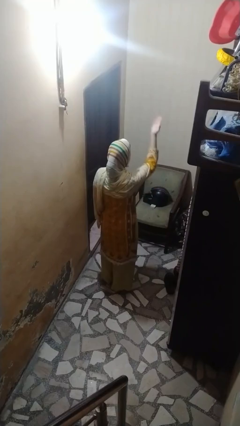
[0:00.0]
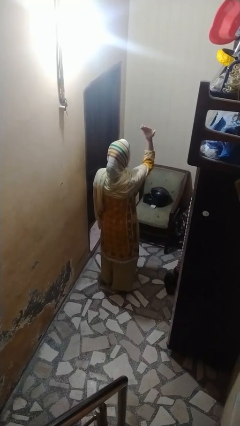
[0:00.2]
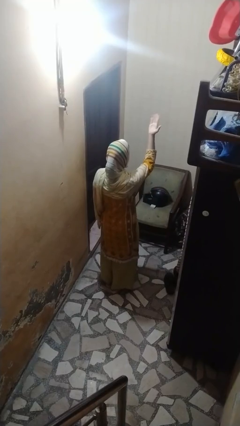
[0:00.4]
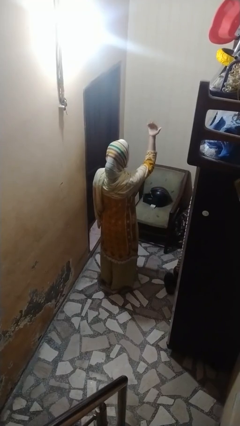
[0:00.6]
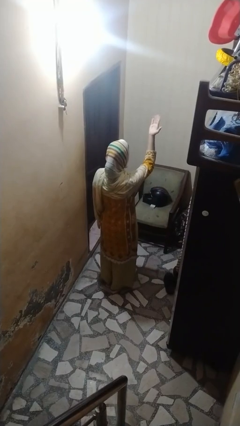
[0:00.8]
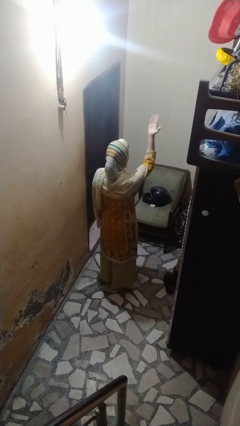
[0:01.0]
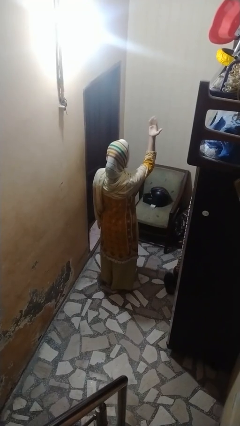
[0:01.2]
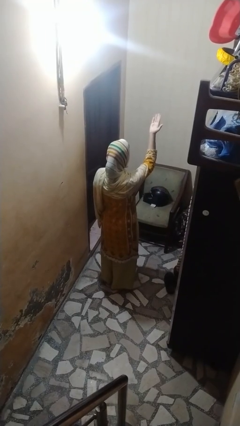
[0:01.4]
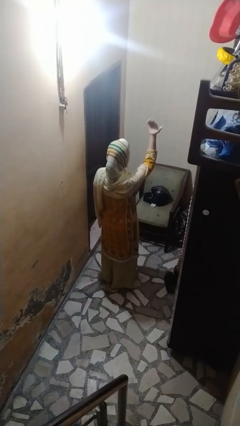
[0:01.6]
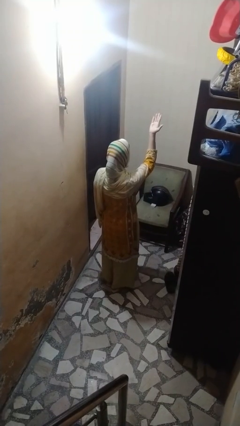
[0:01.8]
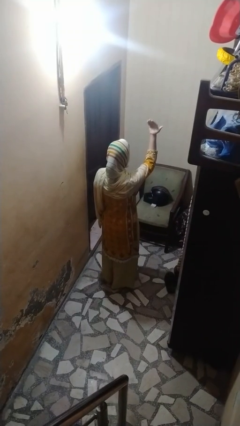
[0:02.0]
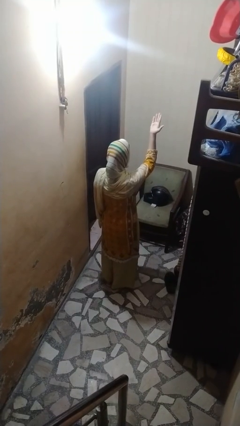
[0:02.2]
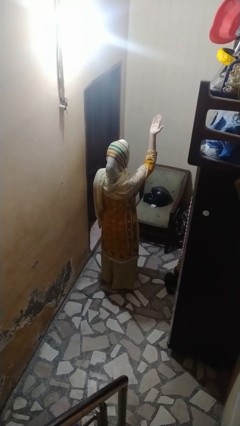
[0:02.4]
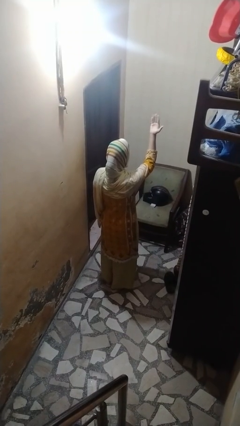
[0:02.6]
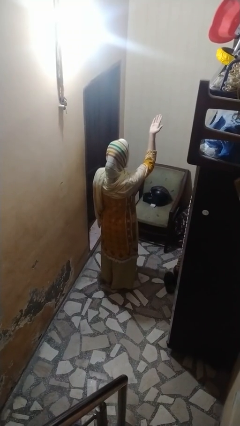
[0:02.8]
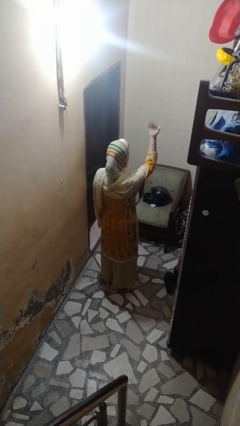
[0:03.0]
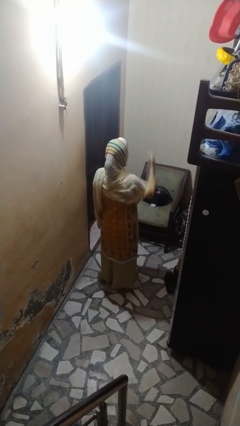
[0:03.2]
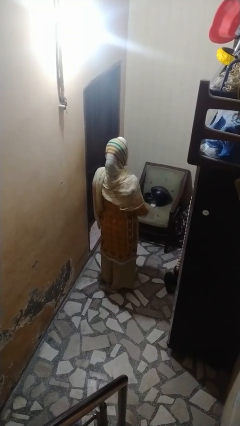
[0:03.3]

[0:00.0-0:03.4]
person gestures come here

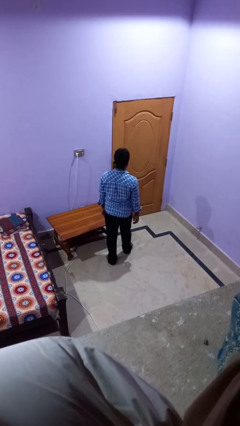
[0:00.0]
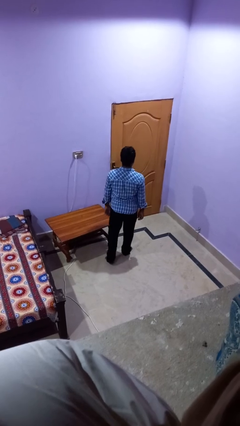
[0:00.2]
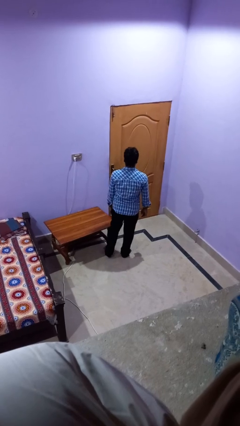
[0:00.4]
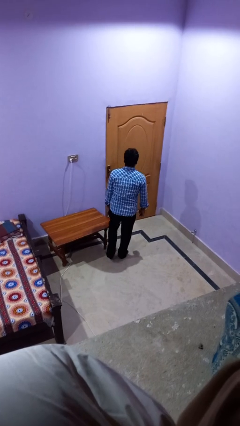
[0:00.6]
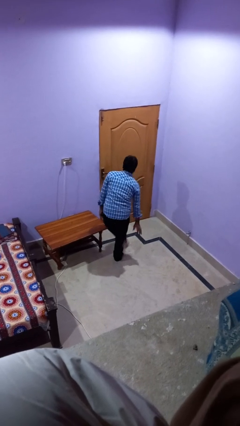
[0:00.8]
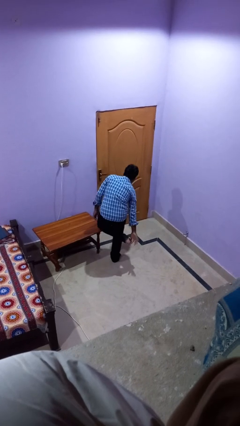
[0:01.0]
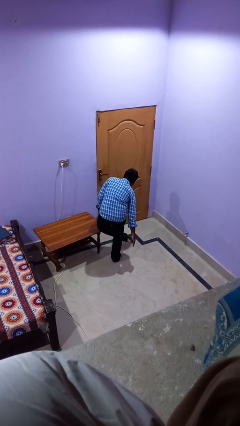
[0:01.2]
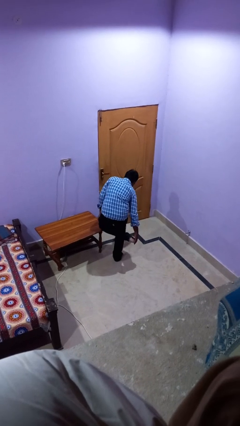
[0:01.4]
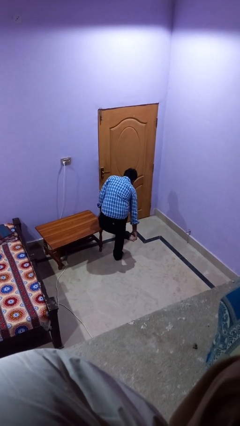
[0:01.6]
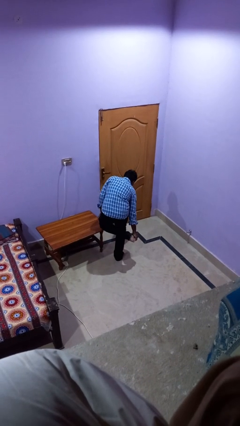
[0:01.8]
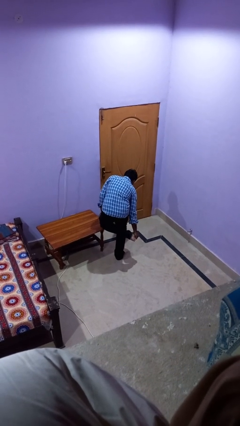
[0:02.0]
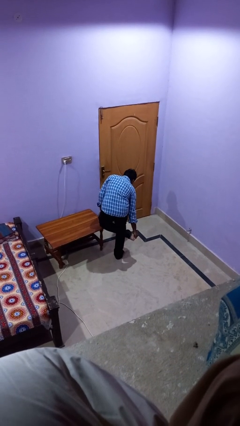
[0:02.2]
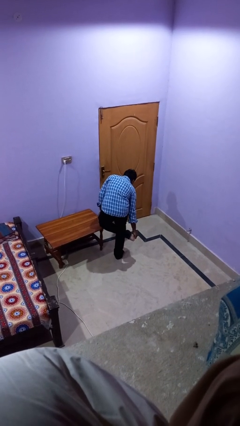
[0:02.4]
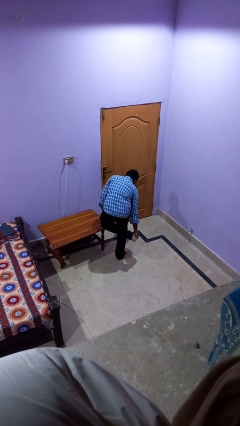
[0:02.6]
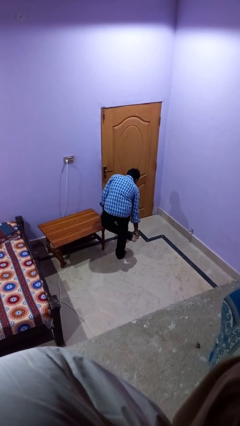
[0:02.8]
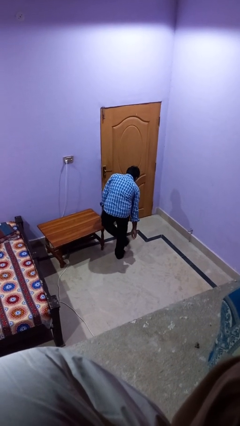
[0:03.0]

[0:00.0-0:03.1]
person stubs toe

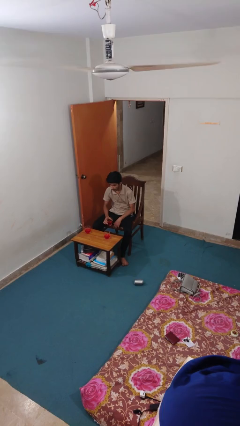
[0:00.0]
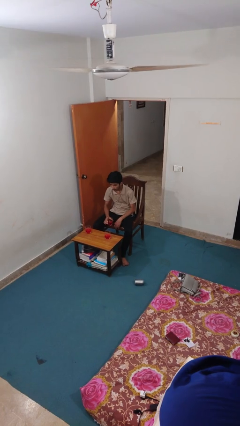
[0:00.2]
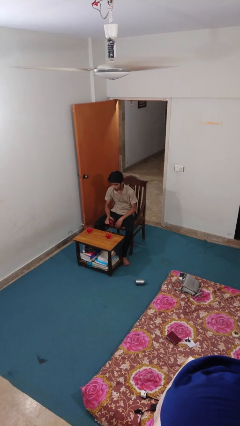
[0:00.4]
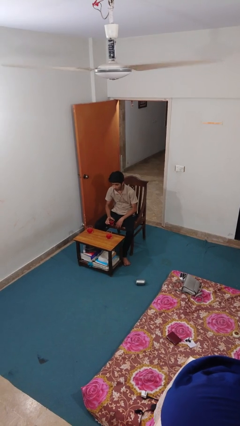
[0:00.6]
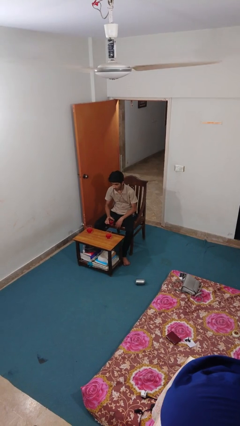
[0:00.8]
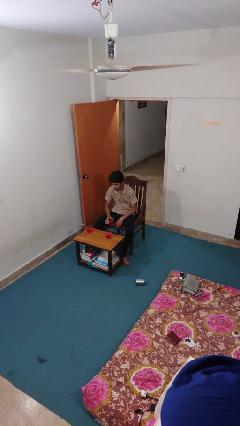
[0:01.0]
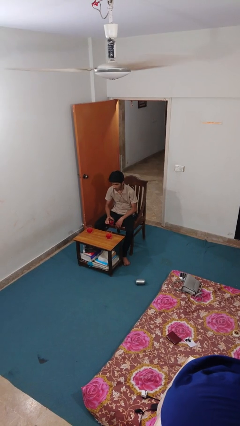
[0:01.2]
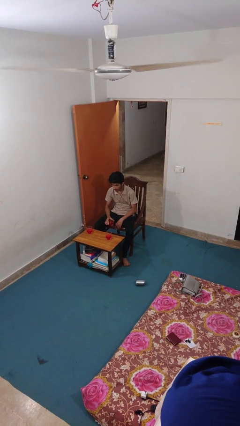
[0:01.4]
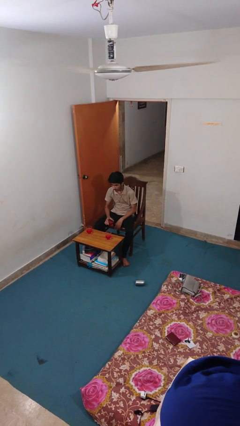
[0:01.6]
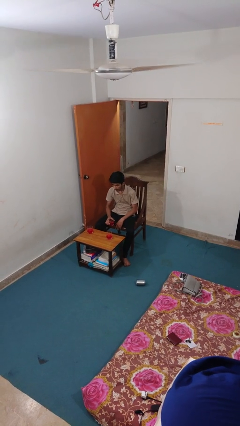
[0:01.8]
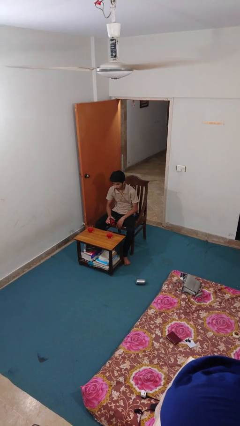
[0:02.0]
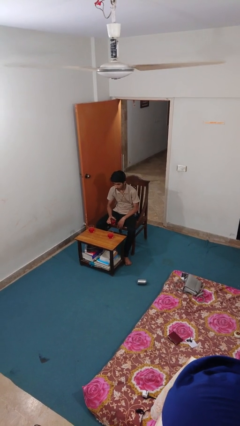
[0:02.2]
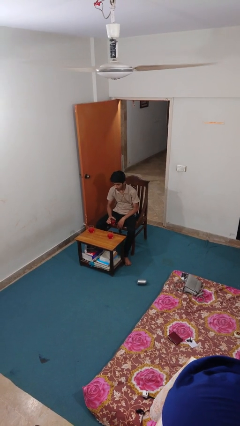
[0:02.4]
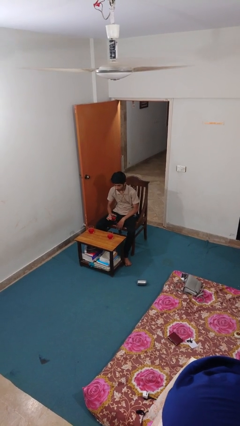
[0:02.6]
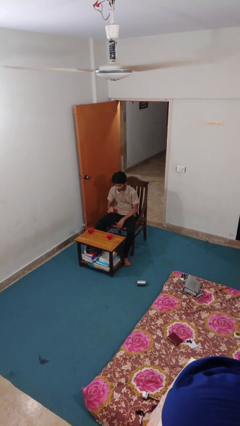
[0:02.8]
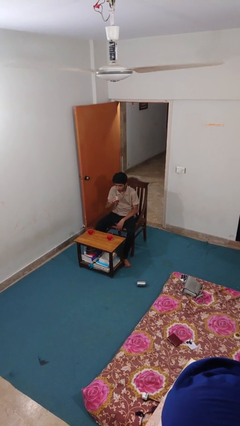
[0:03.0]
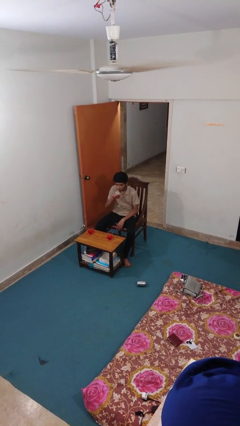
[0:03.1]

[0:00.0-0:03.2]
person picks up object from table

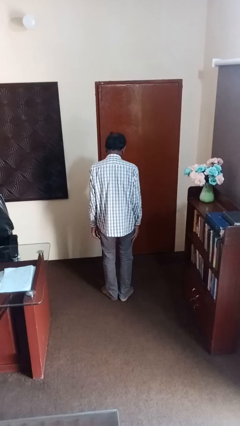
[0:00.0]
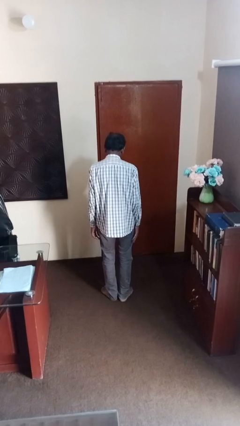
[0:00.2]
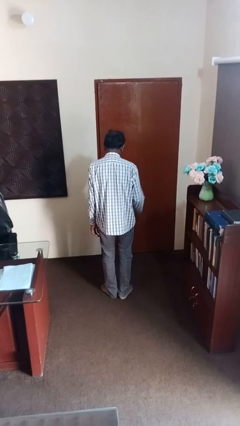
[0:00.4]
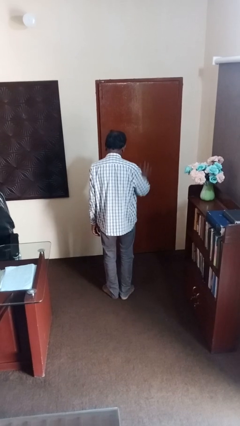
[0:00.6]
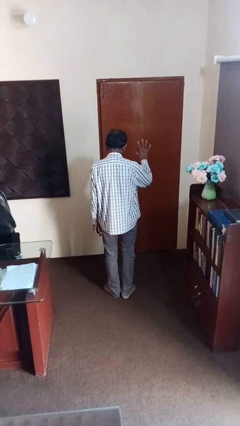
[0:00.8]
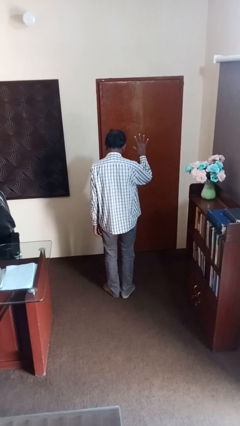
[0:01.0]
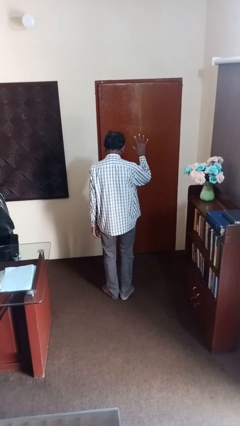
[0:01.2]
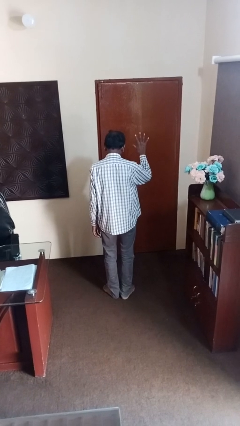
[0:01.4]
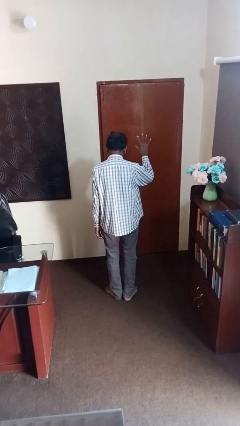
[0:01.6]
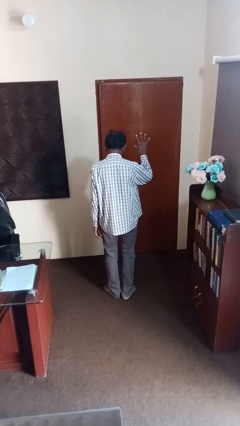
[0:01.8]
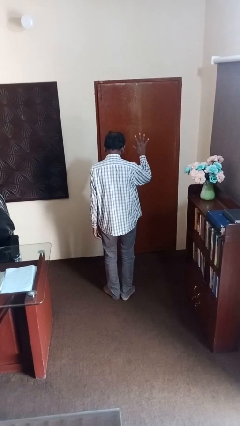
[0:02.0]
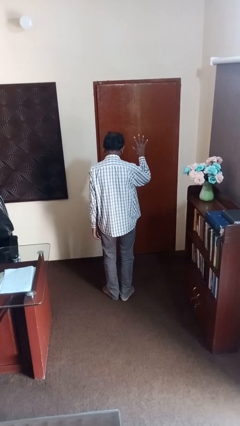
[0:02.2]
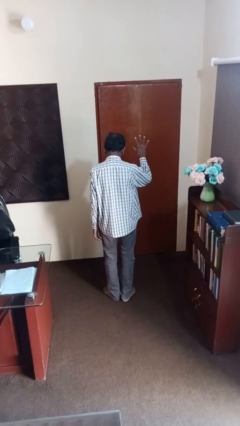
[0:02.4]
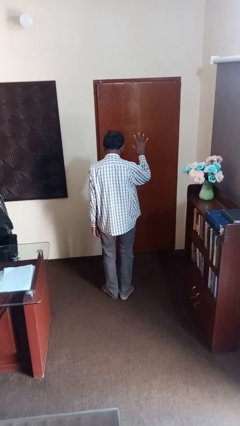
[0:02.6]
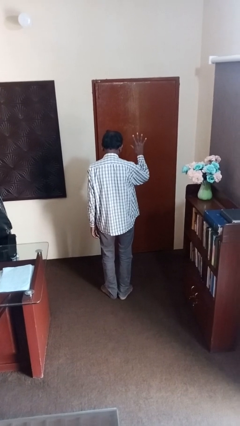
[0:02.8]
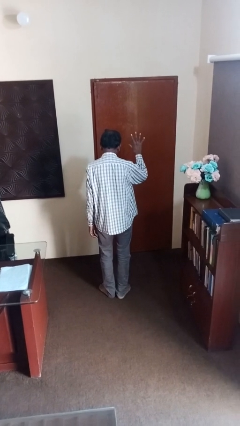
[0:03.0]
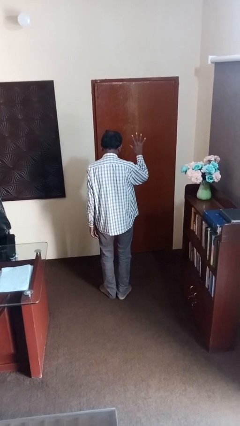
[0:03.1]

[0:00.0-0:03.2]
person gestures number five

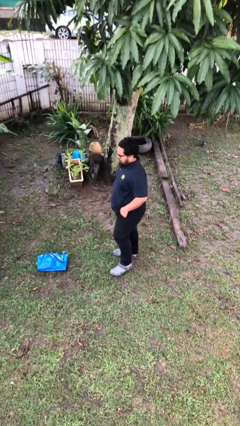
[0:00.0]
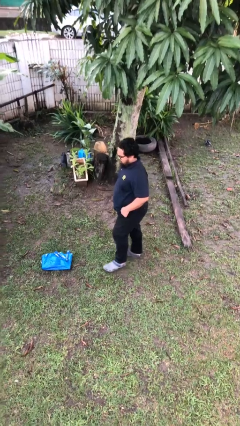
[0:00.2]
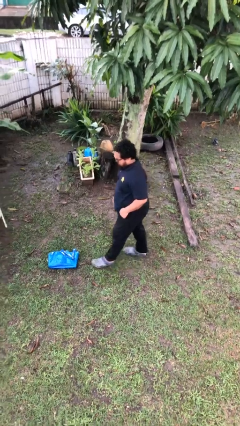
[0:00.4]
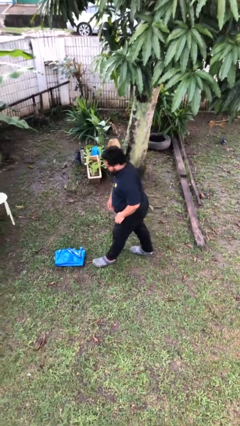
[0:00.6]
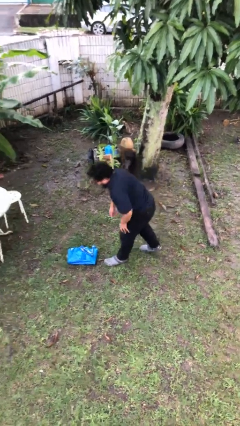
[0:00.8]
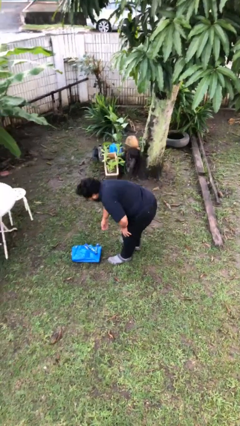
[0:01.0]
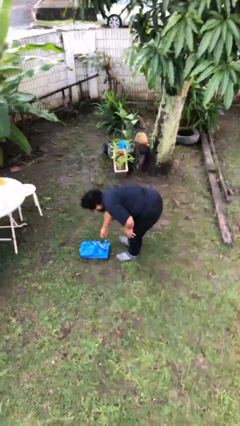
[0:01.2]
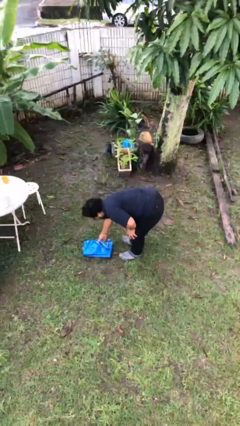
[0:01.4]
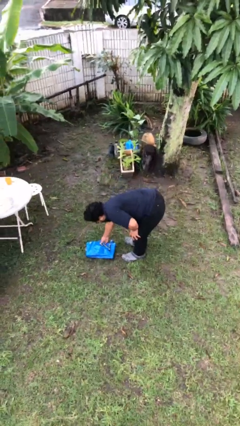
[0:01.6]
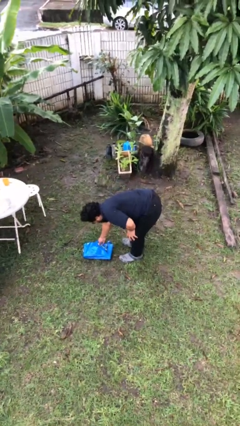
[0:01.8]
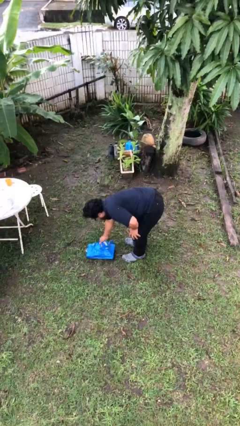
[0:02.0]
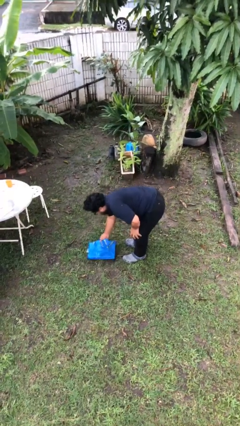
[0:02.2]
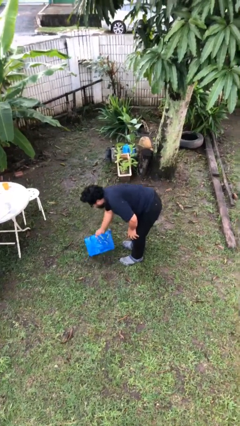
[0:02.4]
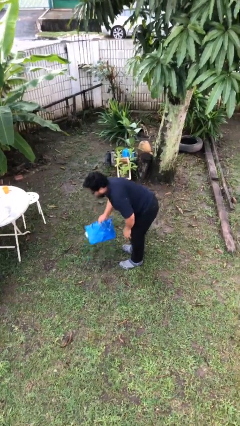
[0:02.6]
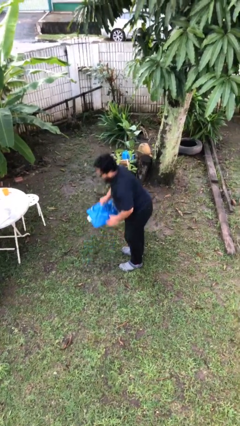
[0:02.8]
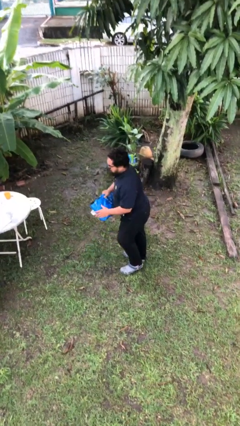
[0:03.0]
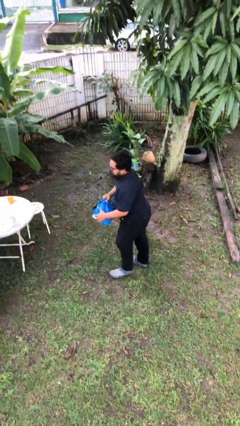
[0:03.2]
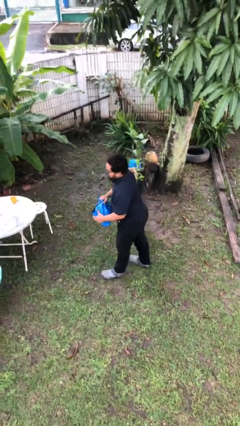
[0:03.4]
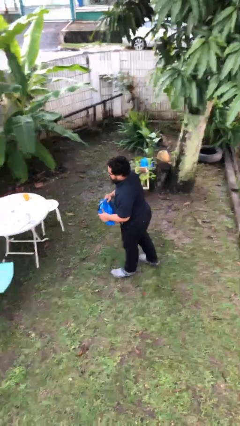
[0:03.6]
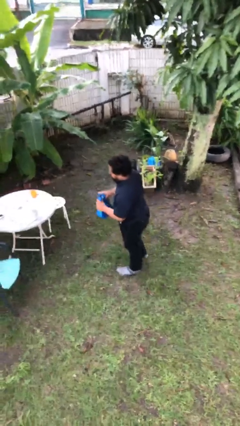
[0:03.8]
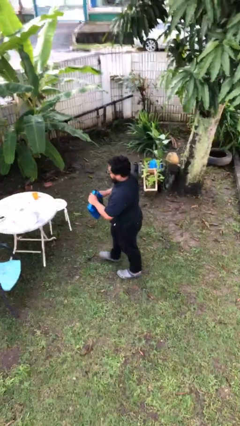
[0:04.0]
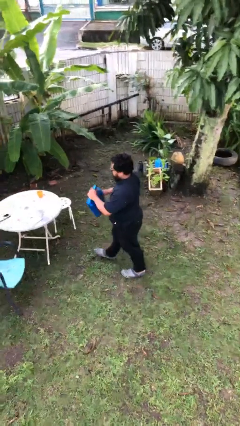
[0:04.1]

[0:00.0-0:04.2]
person picks up object from floor

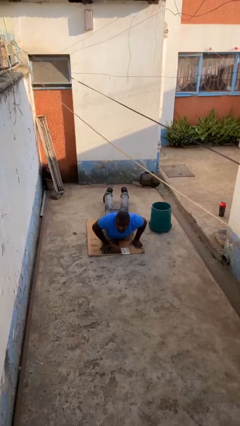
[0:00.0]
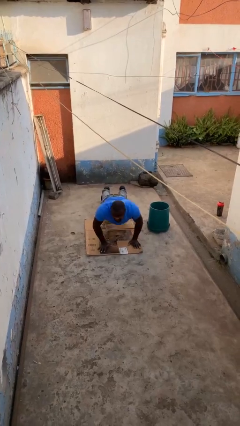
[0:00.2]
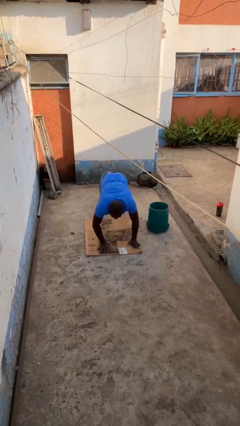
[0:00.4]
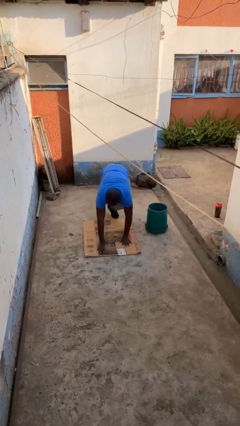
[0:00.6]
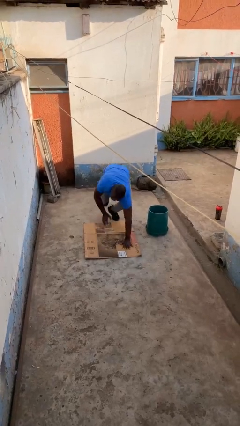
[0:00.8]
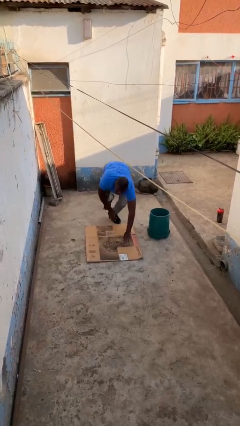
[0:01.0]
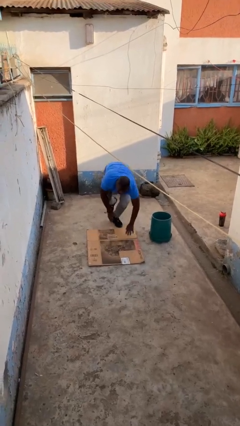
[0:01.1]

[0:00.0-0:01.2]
person stands up from floor
